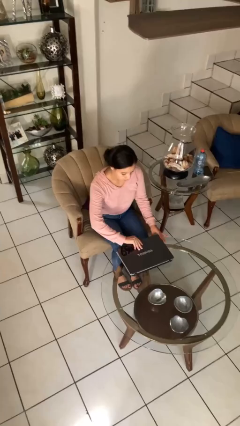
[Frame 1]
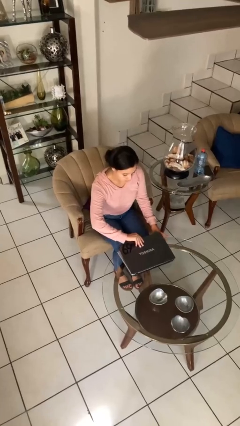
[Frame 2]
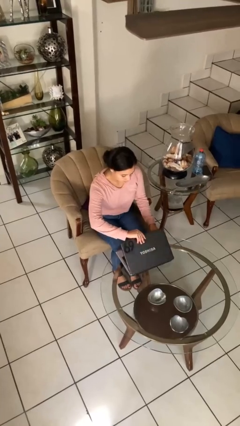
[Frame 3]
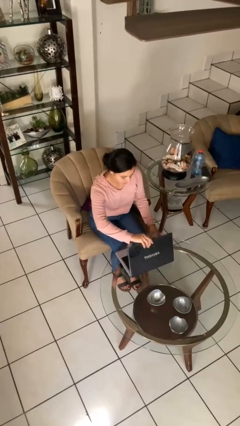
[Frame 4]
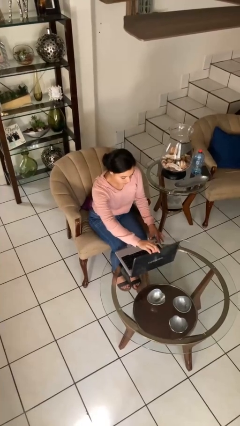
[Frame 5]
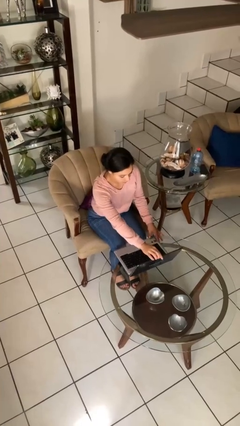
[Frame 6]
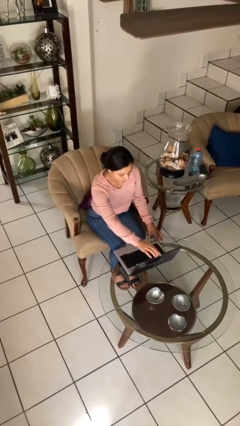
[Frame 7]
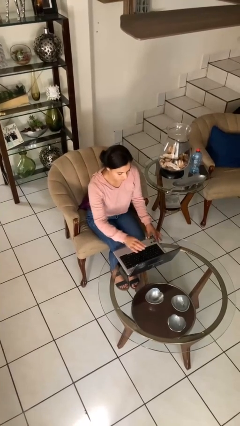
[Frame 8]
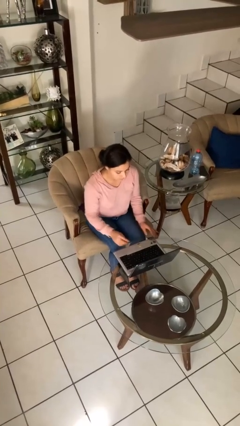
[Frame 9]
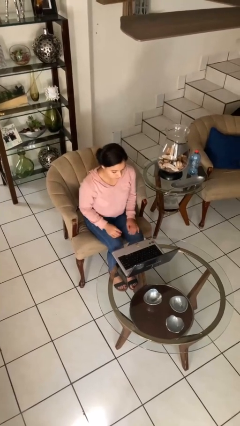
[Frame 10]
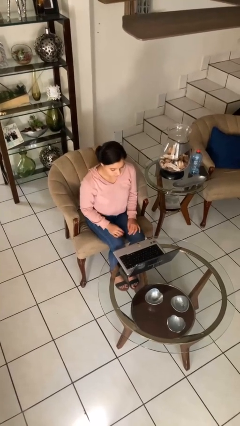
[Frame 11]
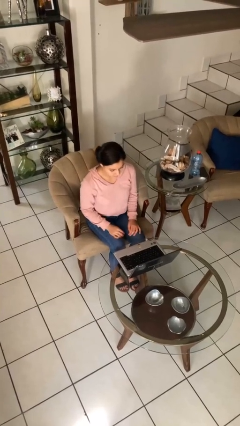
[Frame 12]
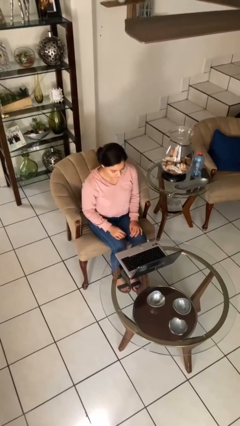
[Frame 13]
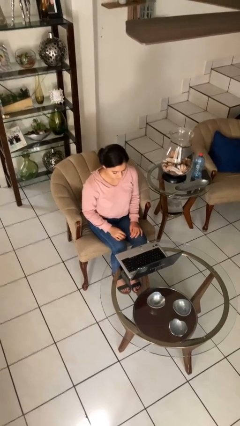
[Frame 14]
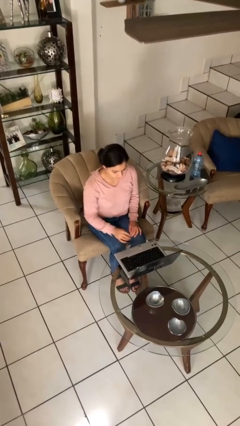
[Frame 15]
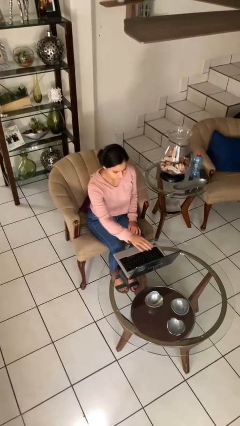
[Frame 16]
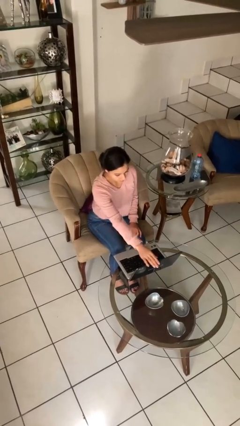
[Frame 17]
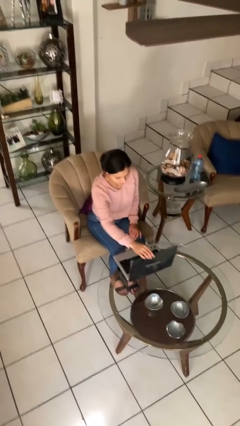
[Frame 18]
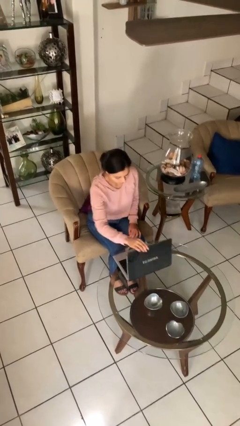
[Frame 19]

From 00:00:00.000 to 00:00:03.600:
person opens laptop

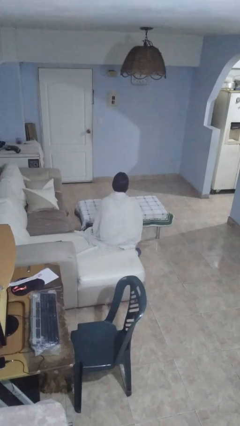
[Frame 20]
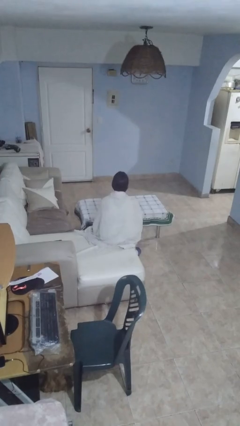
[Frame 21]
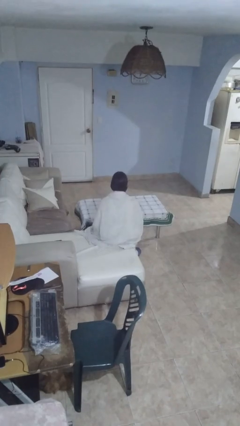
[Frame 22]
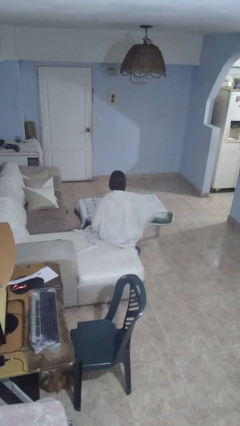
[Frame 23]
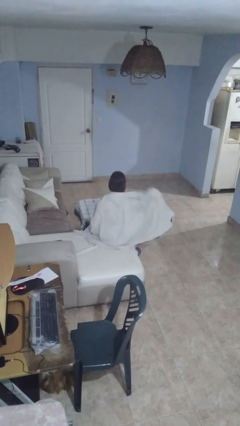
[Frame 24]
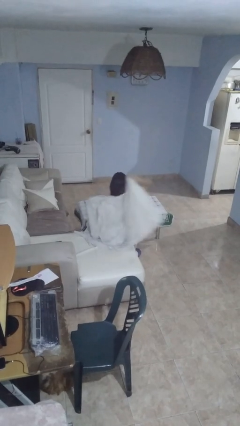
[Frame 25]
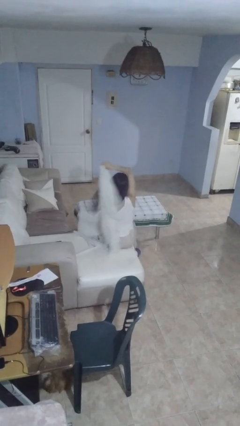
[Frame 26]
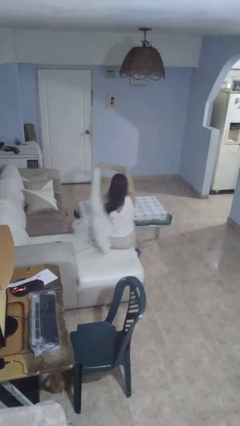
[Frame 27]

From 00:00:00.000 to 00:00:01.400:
person uncovers with blanket

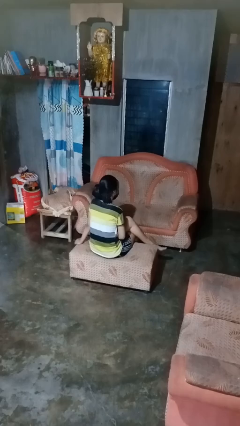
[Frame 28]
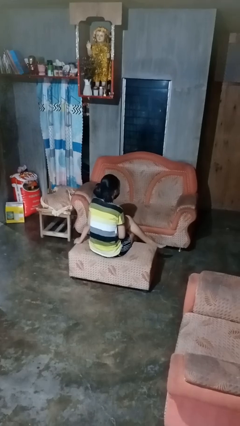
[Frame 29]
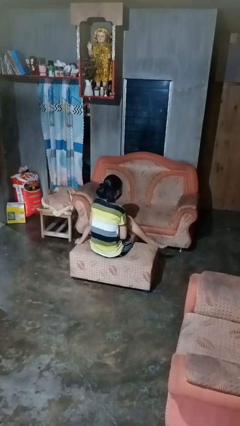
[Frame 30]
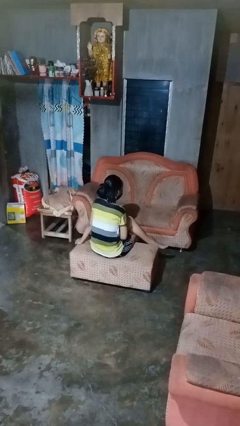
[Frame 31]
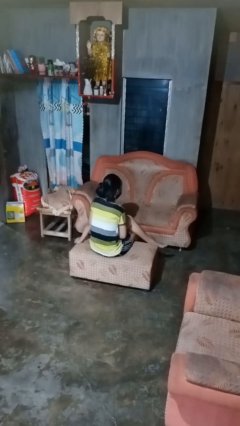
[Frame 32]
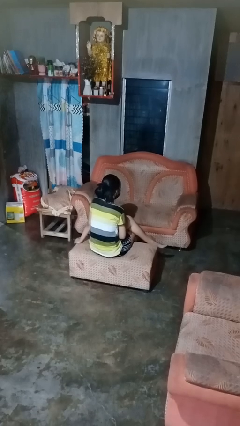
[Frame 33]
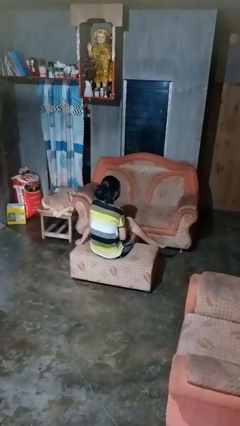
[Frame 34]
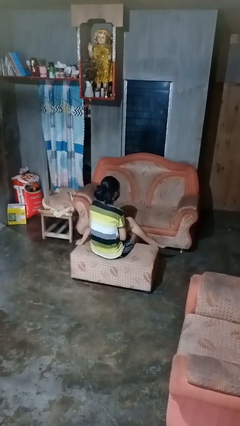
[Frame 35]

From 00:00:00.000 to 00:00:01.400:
person crosses legs

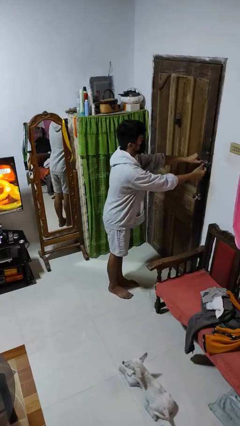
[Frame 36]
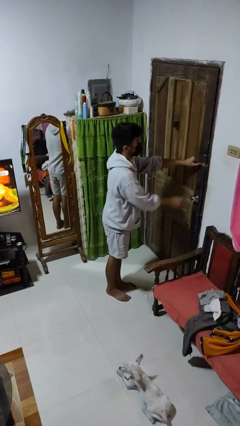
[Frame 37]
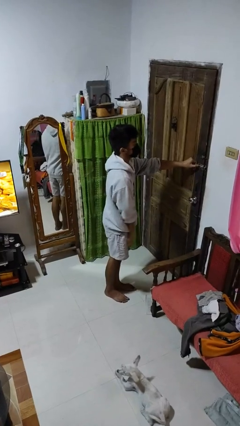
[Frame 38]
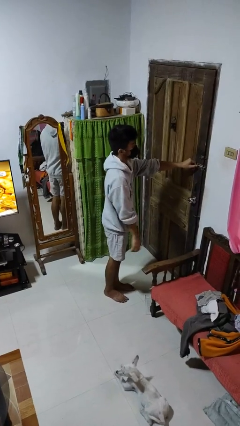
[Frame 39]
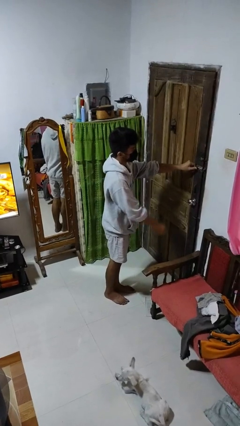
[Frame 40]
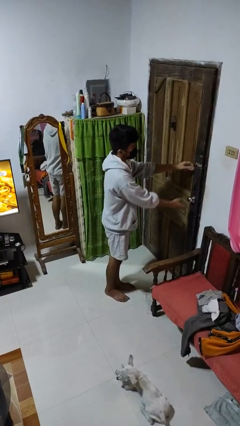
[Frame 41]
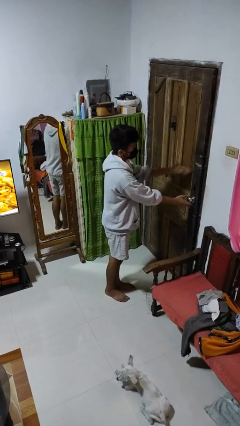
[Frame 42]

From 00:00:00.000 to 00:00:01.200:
person unlocks door with keys

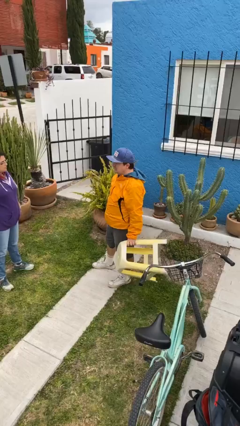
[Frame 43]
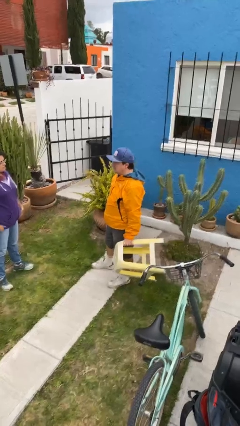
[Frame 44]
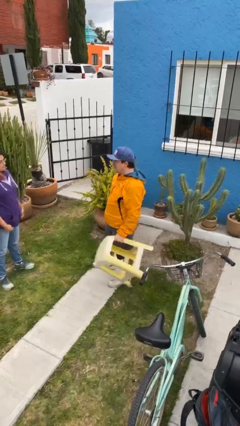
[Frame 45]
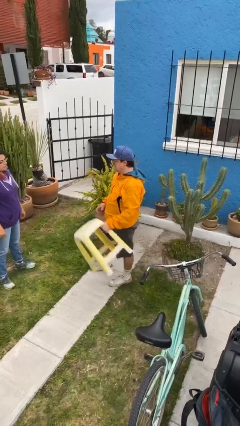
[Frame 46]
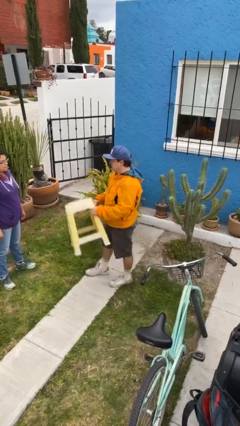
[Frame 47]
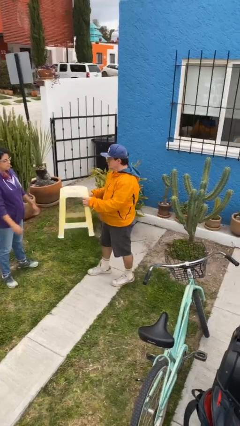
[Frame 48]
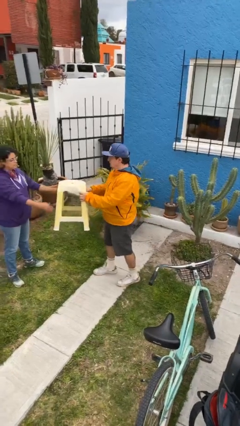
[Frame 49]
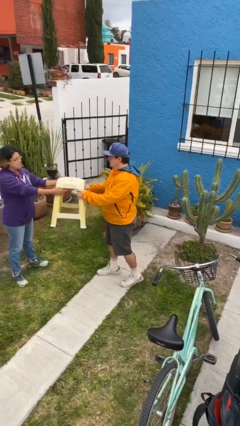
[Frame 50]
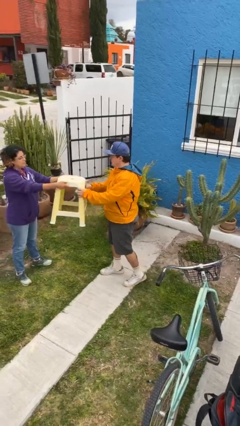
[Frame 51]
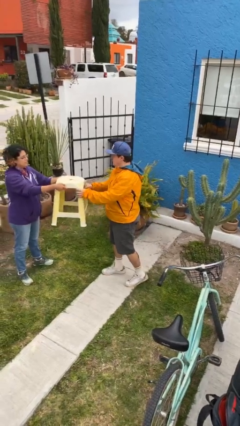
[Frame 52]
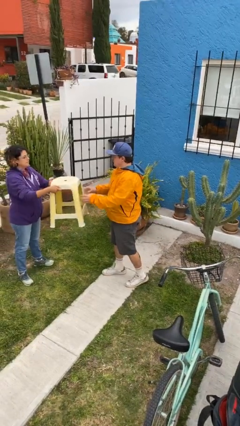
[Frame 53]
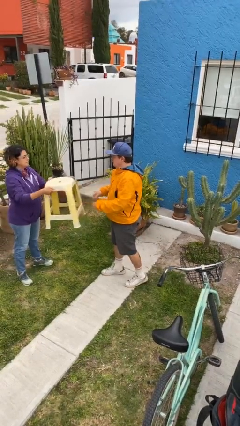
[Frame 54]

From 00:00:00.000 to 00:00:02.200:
person transfers object to person

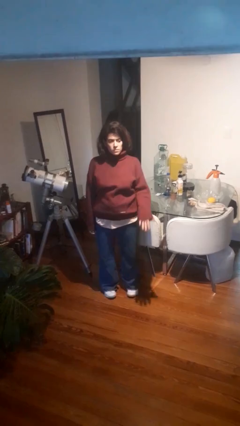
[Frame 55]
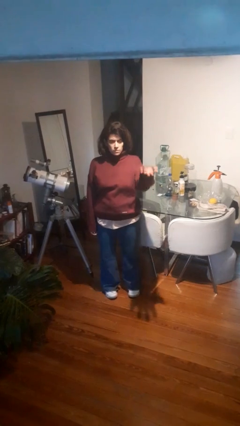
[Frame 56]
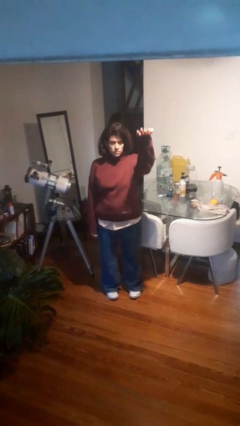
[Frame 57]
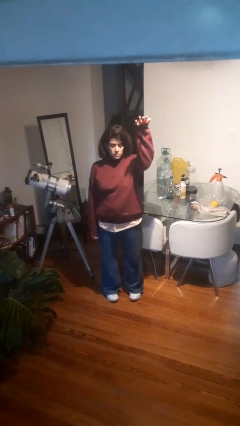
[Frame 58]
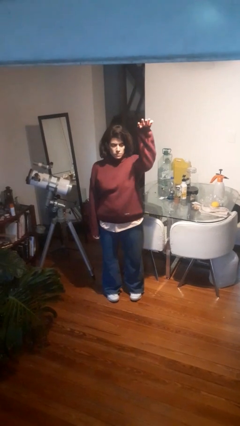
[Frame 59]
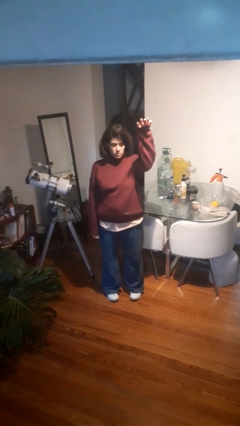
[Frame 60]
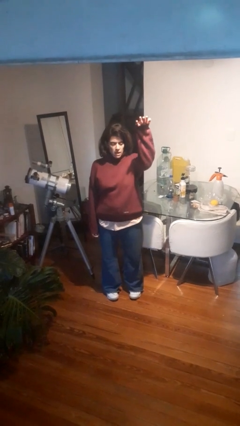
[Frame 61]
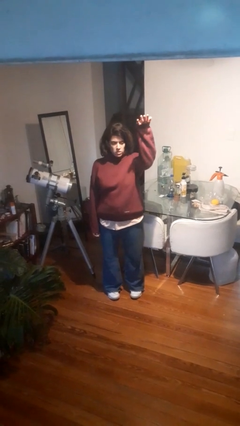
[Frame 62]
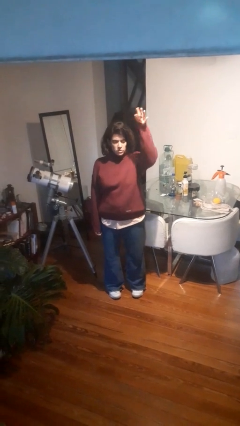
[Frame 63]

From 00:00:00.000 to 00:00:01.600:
person gestures swipe up

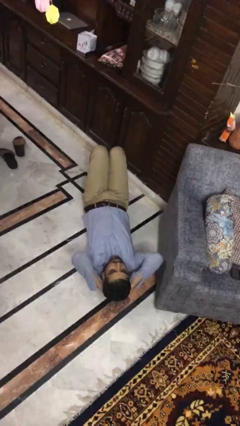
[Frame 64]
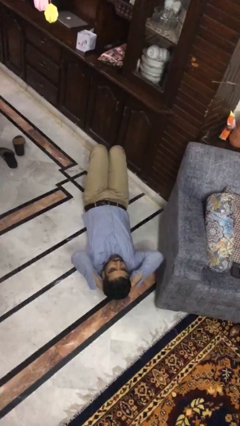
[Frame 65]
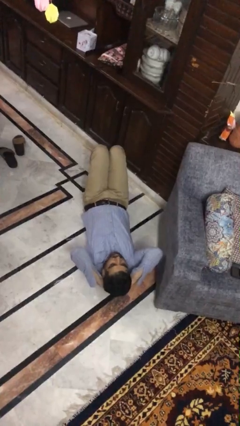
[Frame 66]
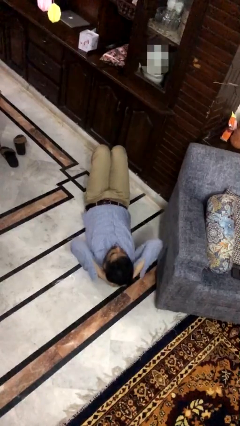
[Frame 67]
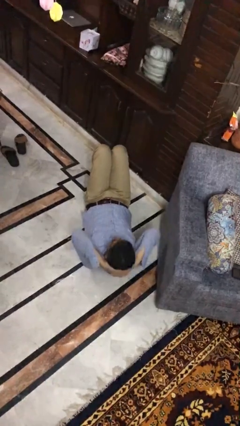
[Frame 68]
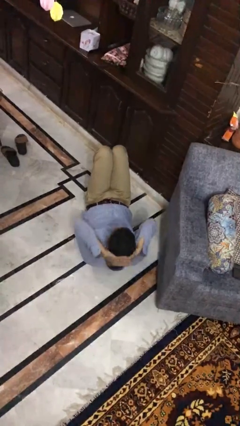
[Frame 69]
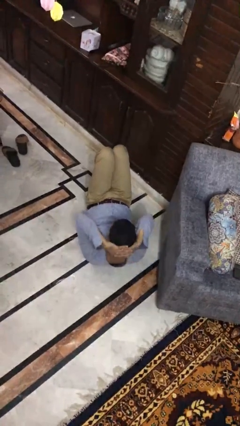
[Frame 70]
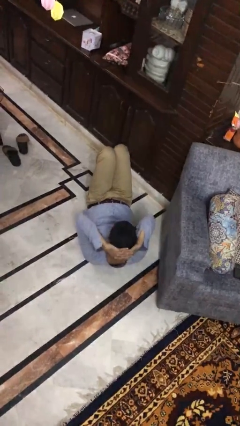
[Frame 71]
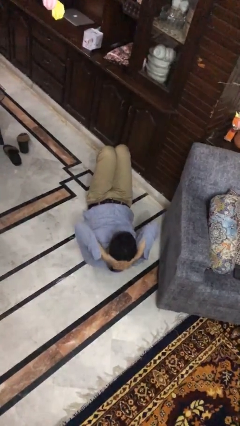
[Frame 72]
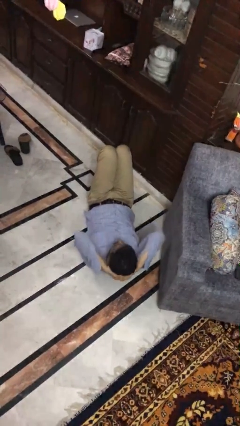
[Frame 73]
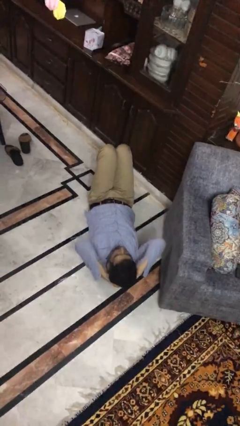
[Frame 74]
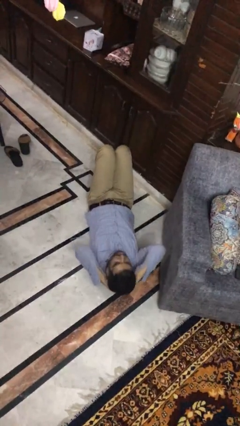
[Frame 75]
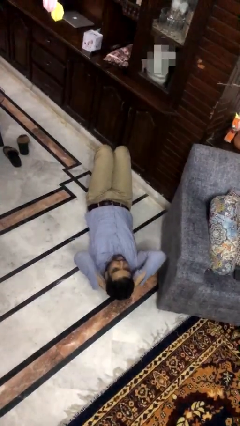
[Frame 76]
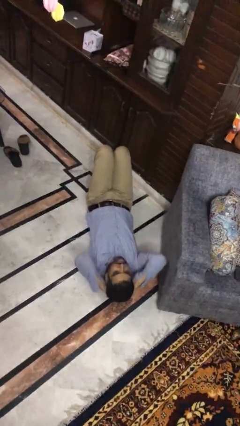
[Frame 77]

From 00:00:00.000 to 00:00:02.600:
person exercises with situp

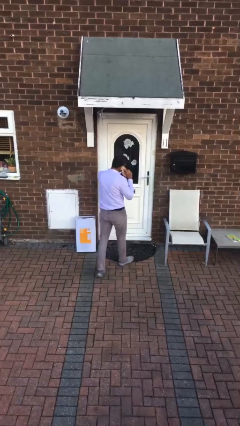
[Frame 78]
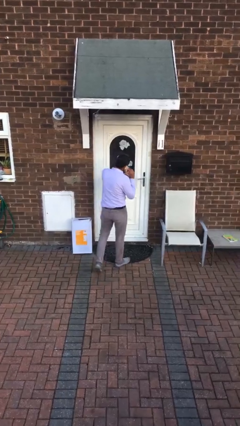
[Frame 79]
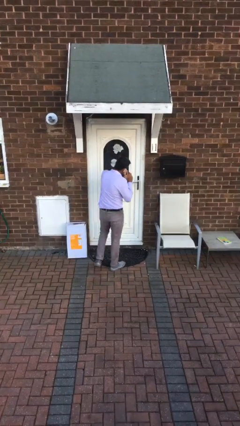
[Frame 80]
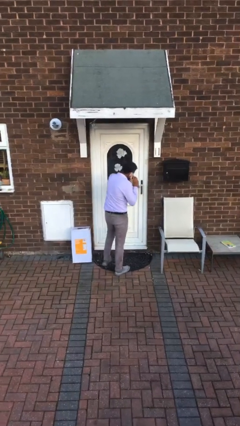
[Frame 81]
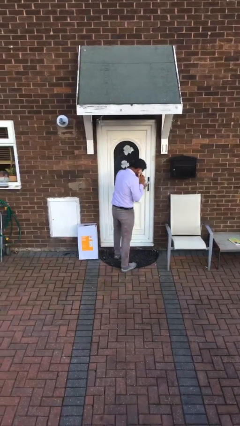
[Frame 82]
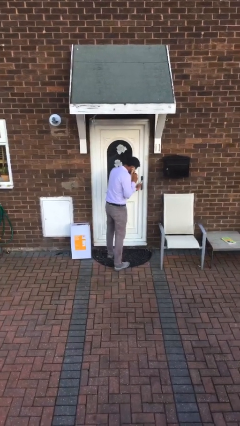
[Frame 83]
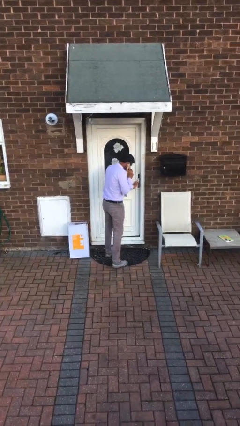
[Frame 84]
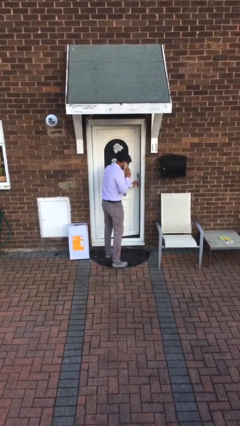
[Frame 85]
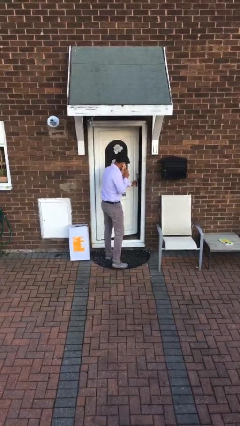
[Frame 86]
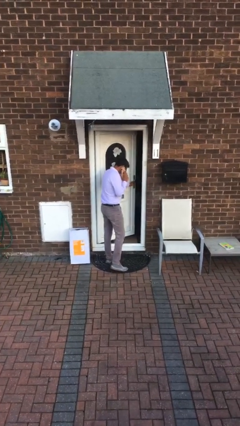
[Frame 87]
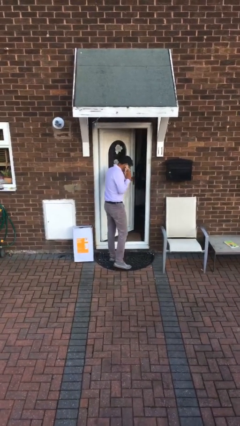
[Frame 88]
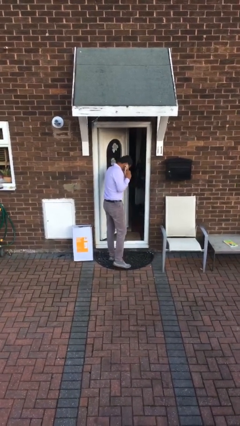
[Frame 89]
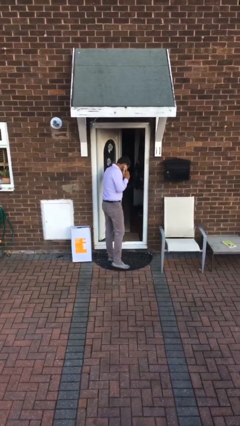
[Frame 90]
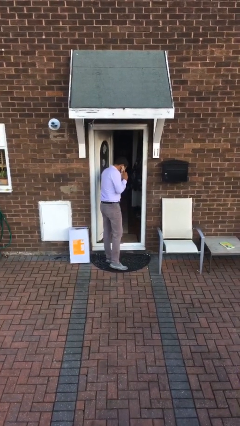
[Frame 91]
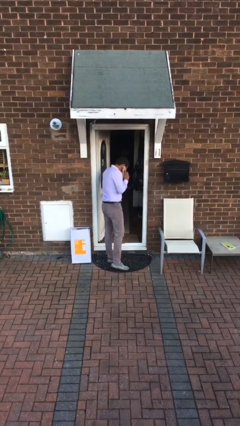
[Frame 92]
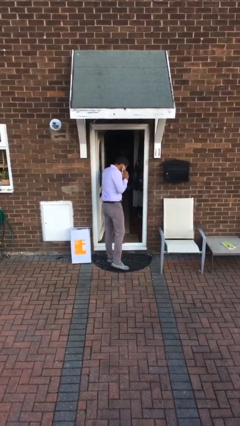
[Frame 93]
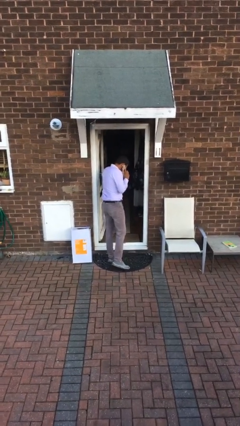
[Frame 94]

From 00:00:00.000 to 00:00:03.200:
person opens facility door
